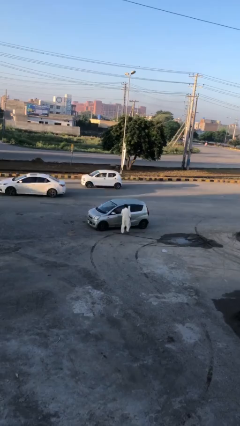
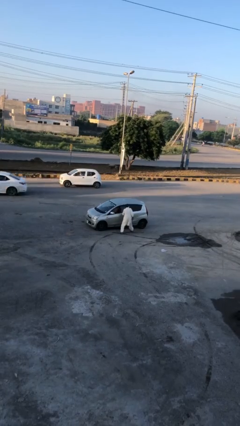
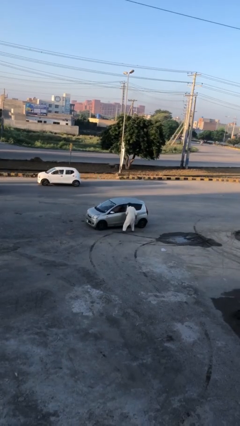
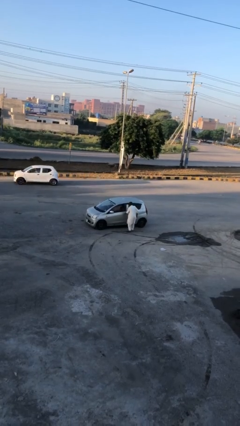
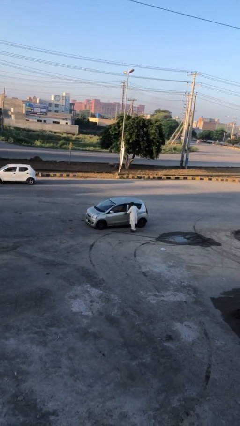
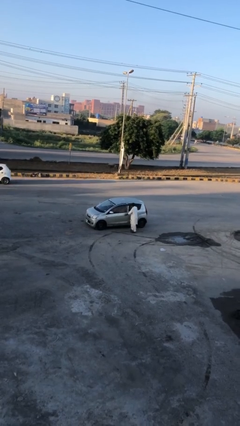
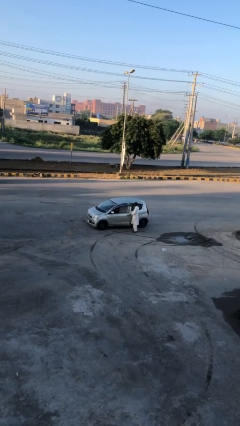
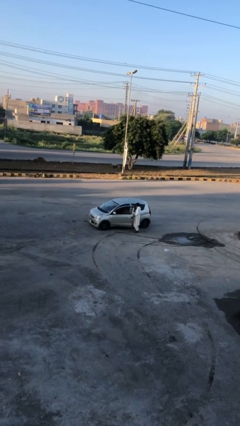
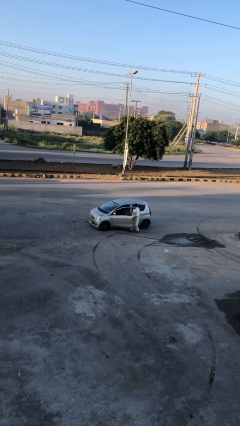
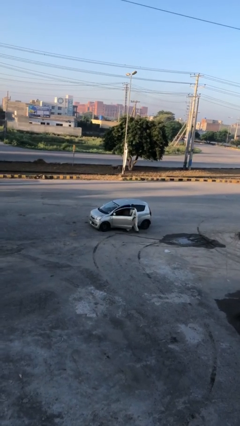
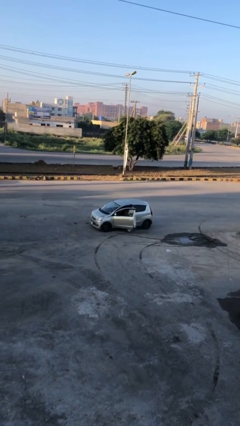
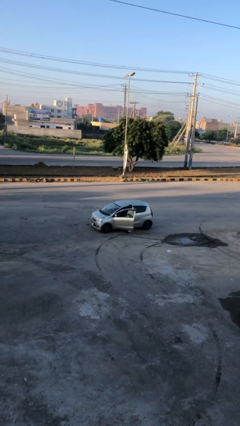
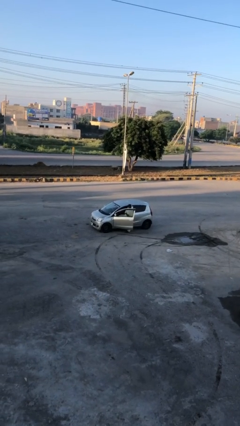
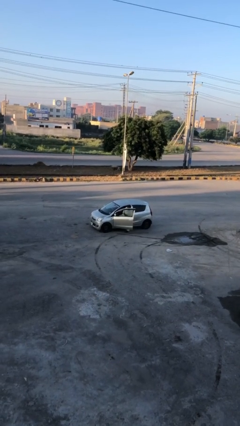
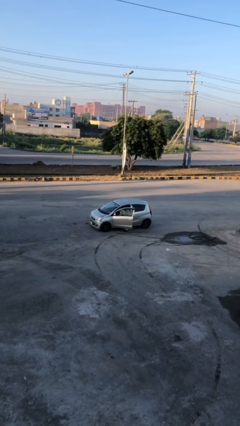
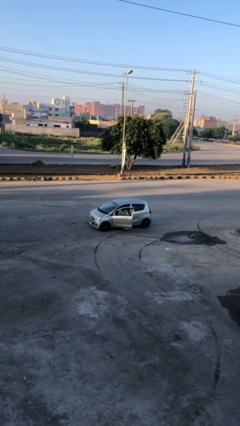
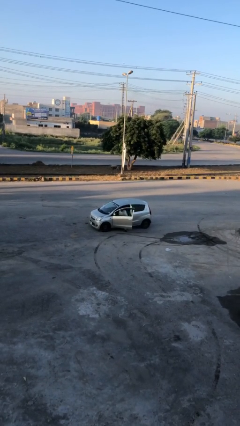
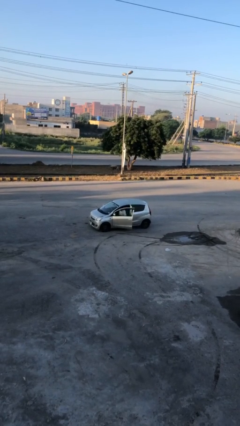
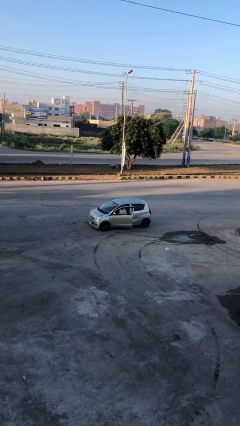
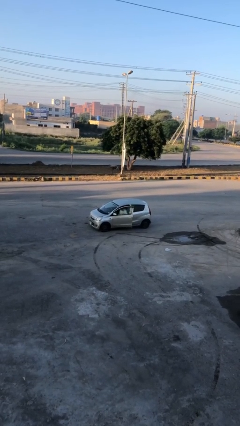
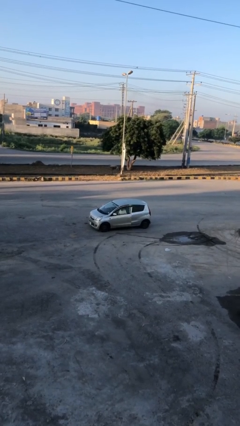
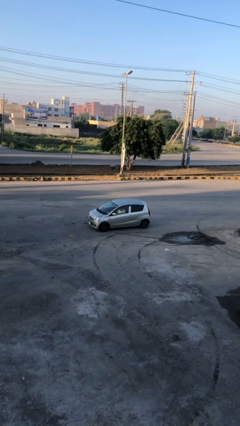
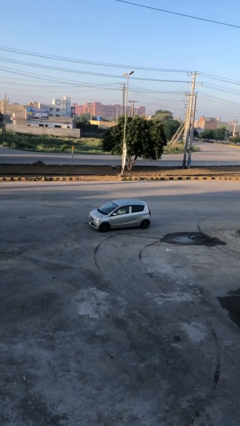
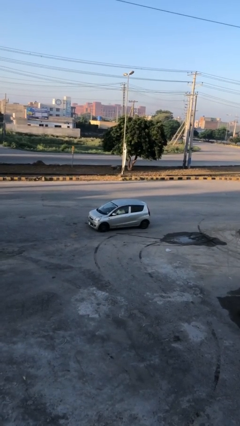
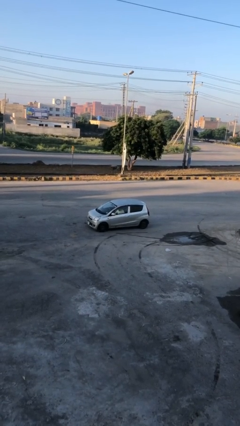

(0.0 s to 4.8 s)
car picks up person

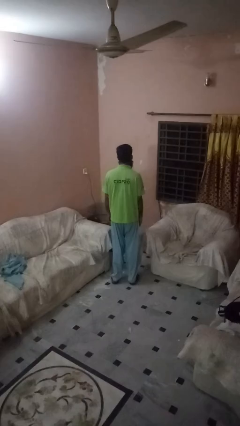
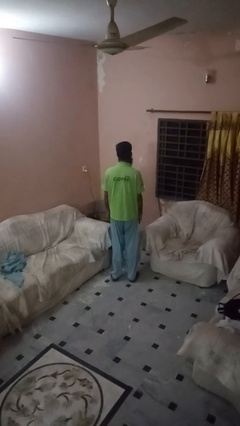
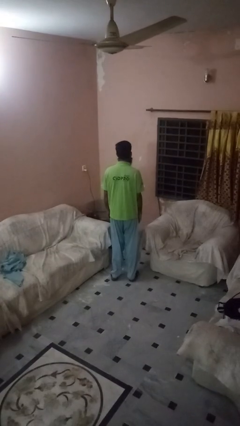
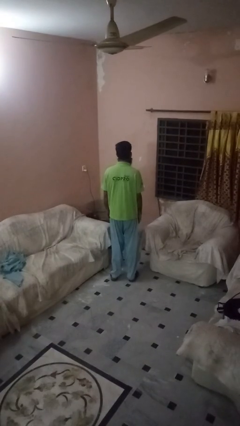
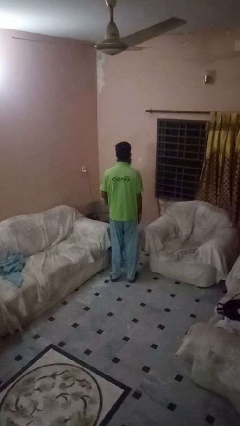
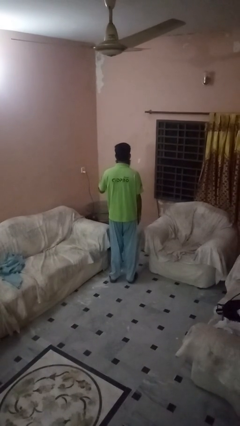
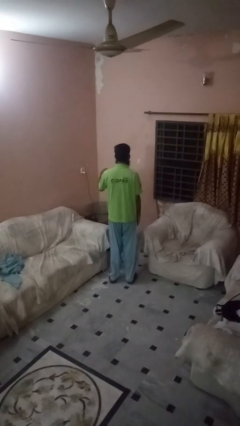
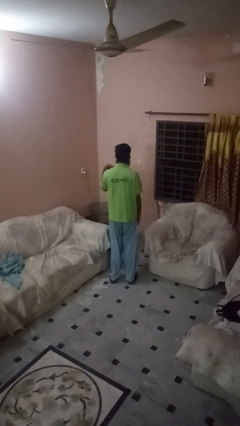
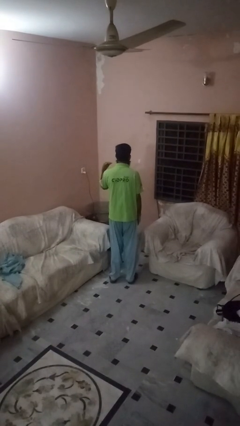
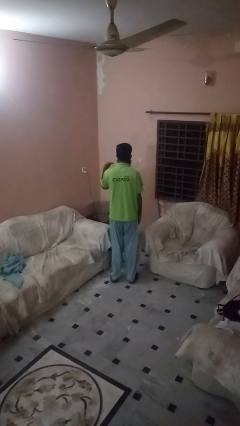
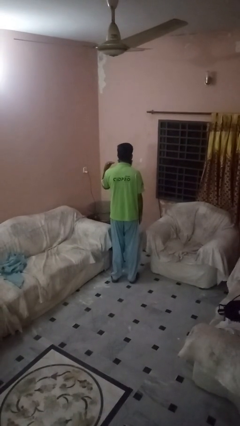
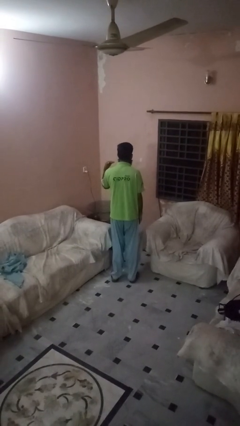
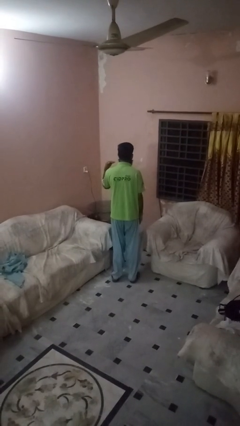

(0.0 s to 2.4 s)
person gestures cut

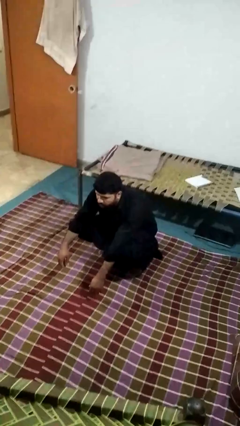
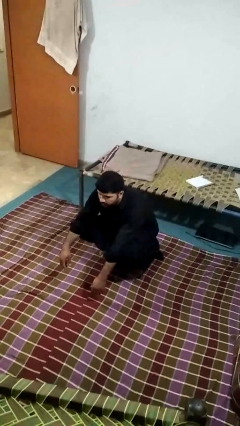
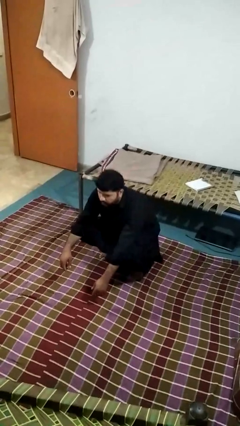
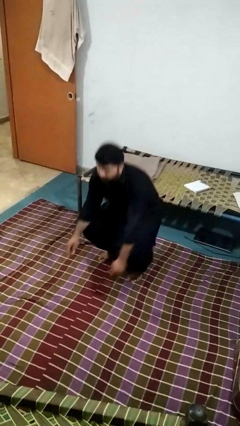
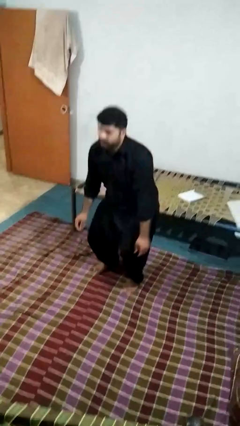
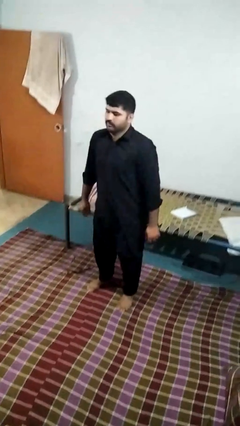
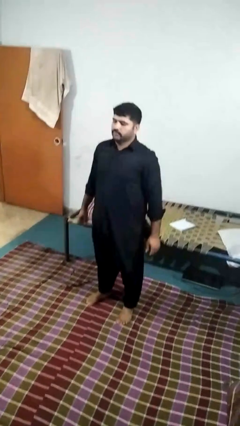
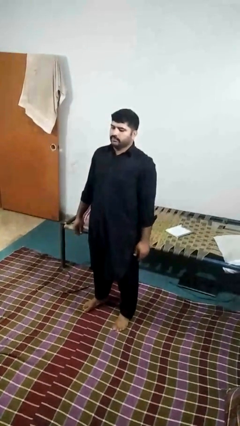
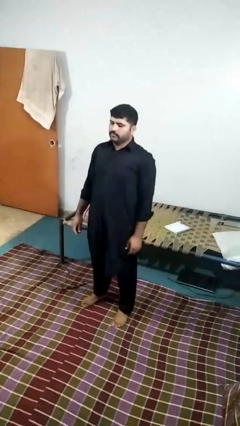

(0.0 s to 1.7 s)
person stands up

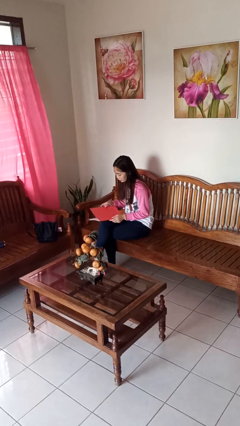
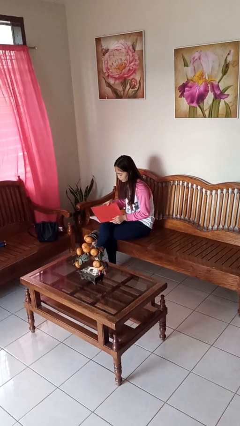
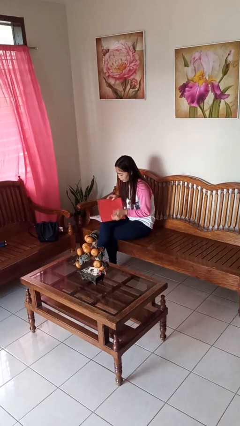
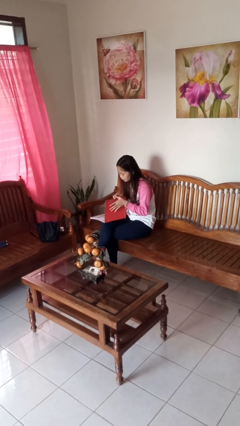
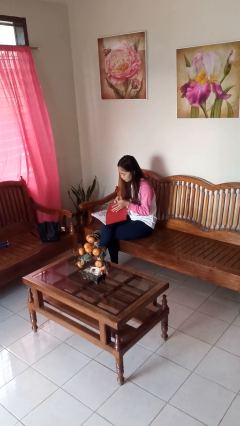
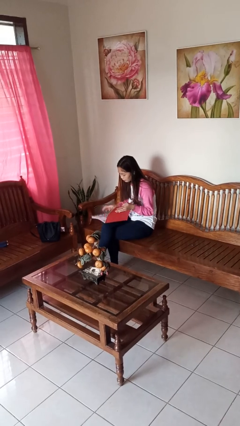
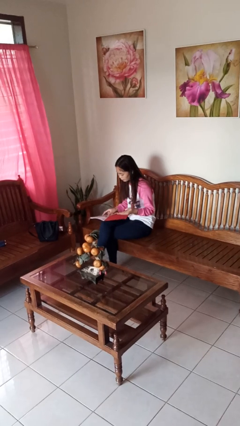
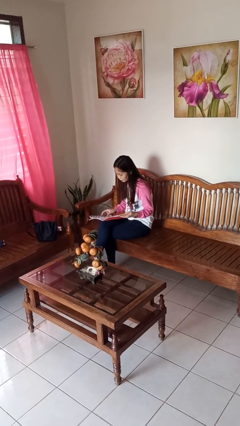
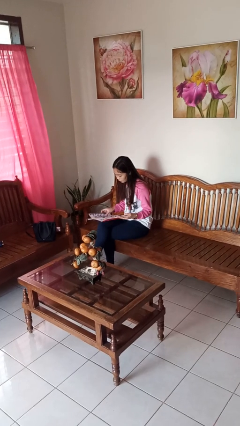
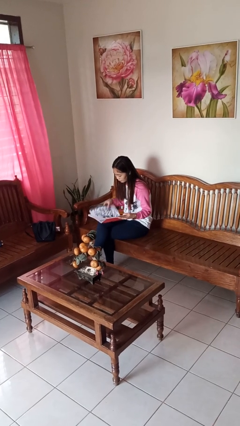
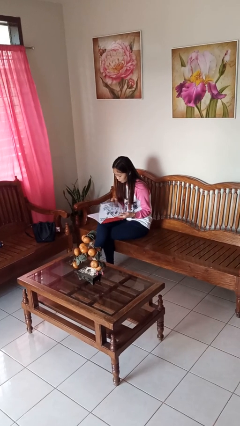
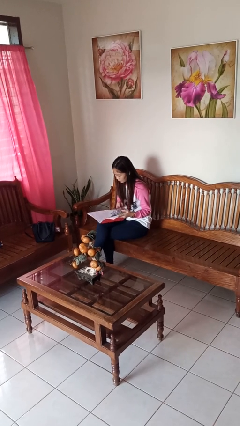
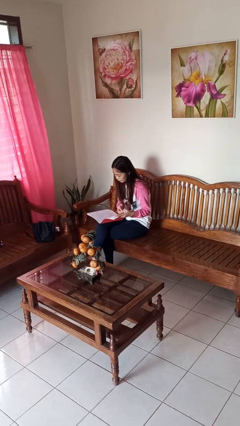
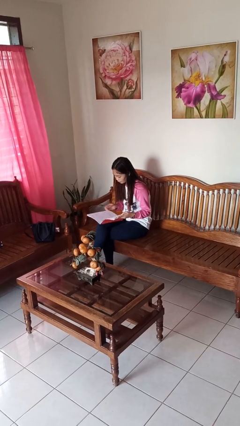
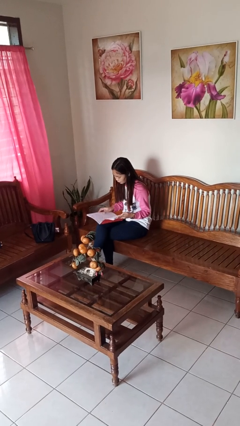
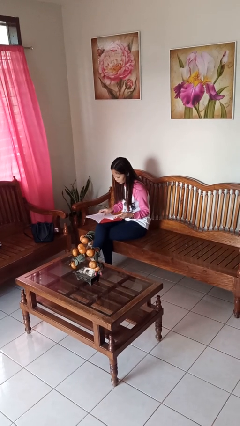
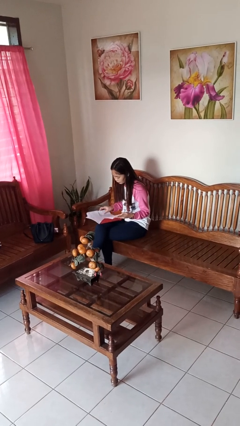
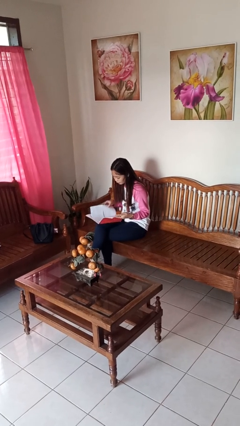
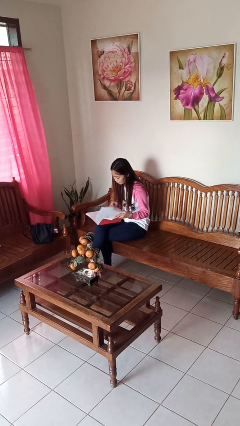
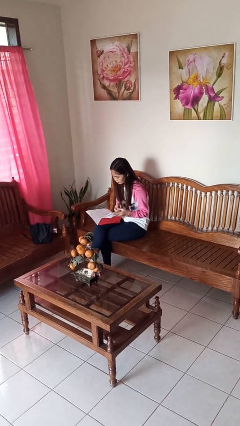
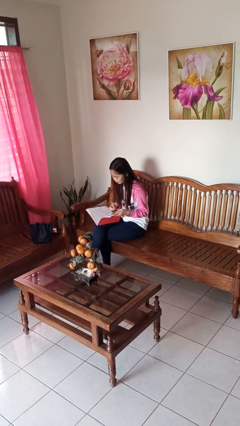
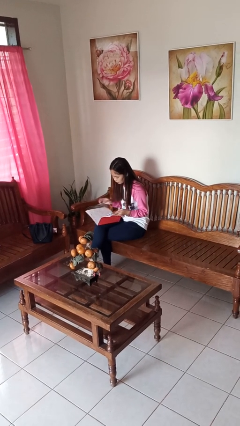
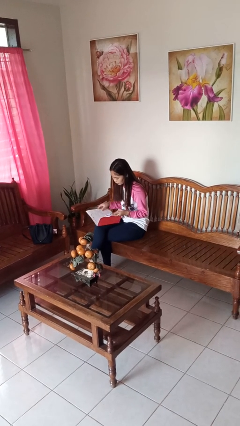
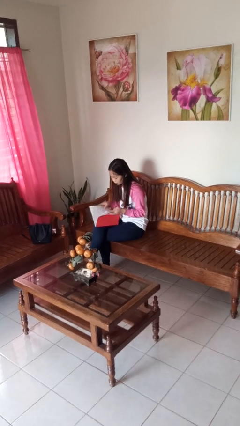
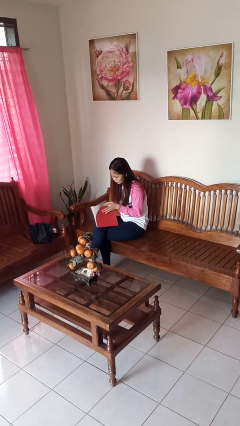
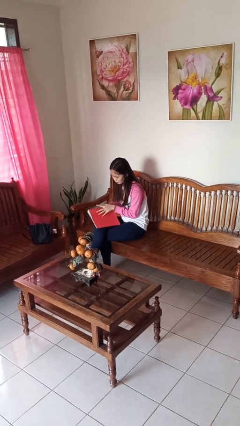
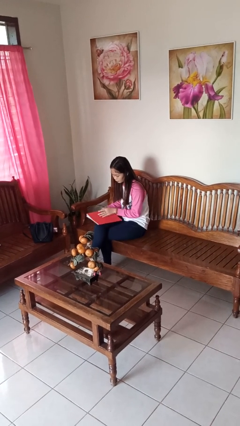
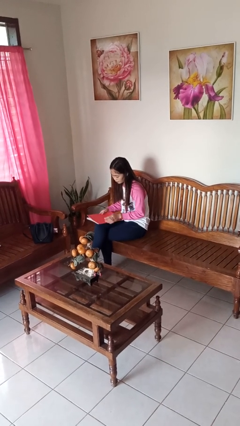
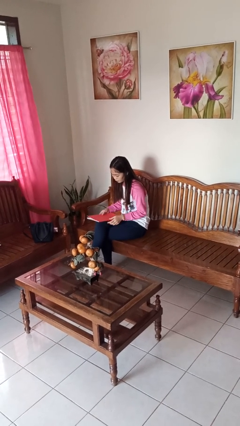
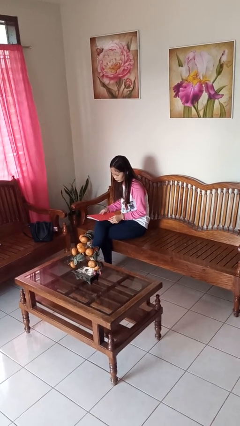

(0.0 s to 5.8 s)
person reads magazine

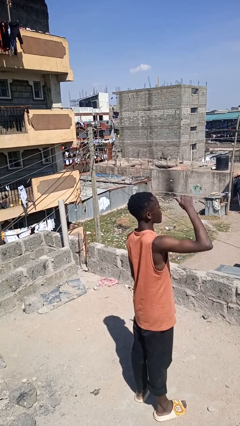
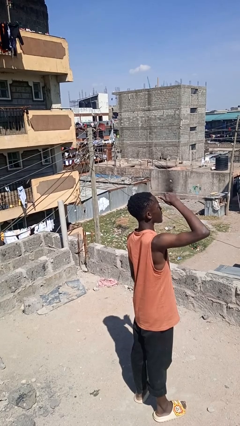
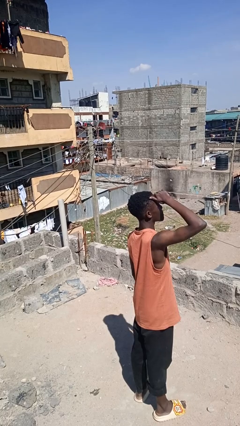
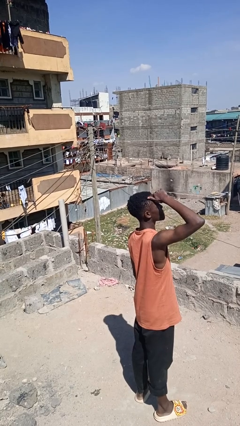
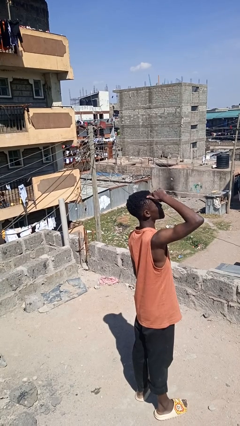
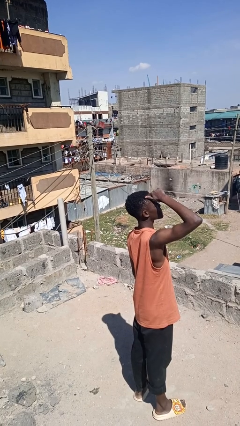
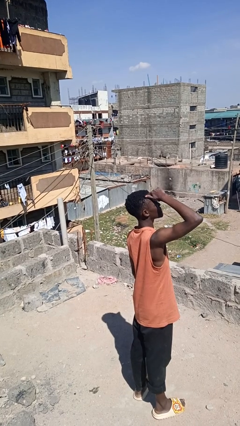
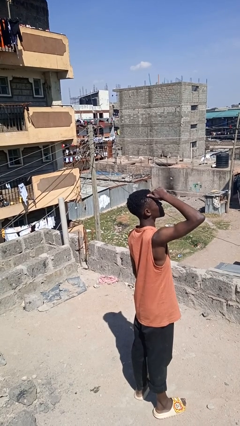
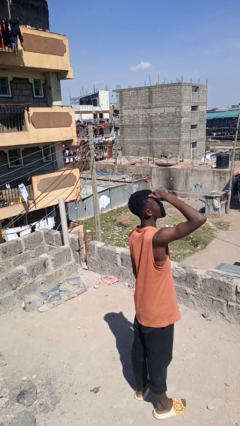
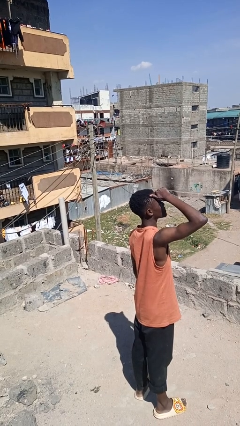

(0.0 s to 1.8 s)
person shades eyes

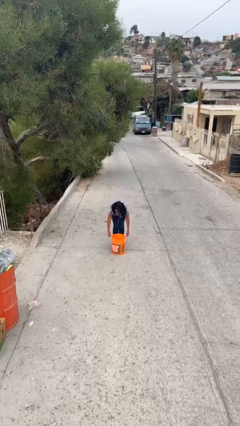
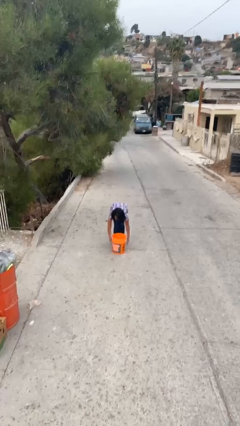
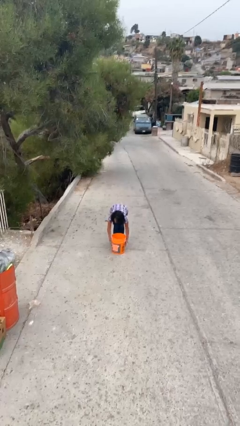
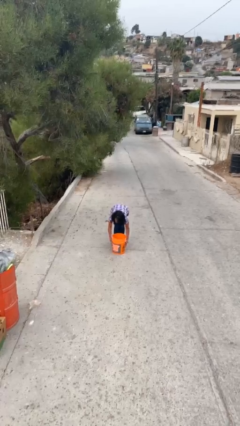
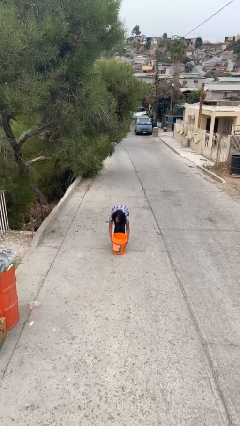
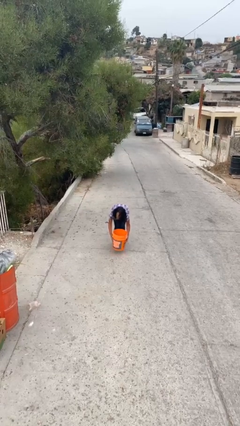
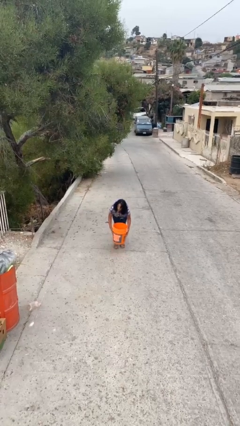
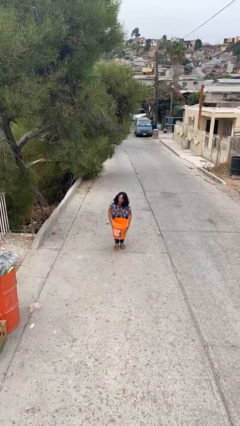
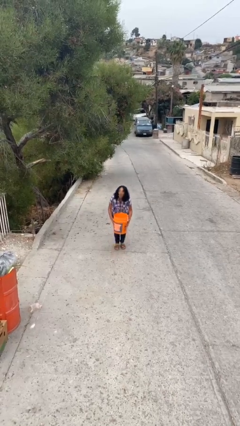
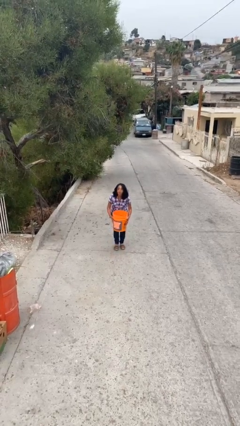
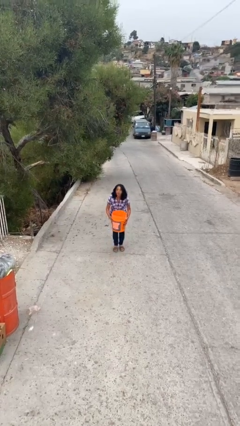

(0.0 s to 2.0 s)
person picks up object from floor
